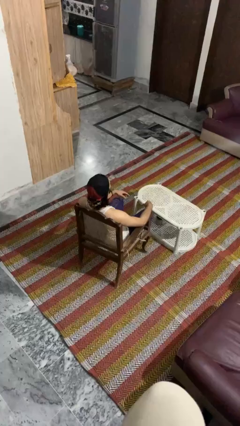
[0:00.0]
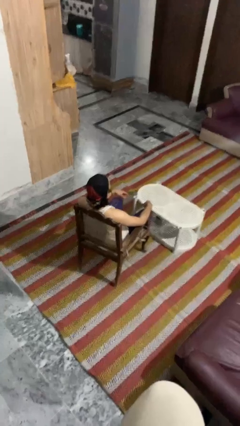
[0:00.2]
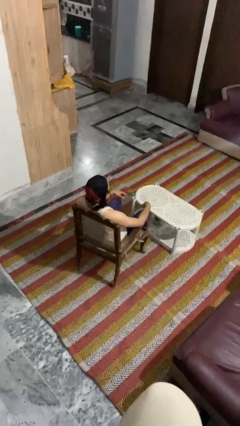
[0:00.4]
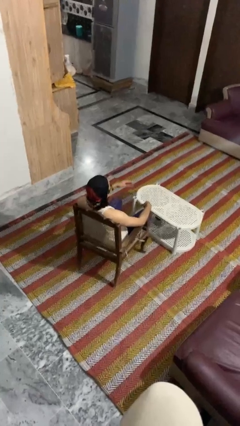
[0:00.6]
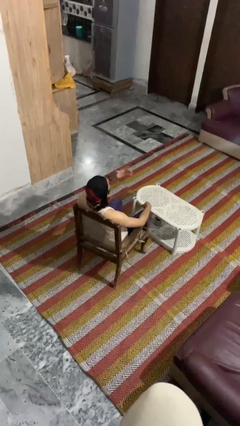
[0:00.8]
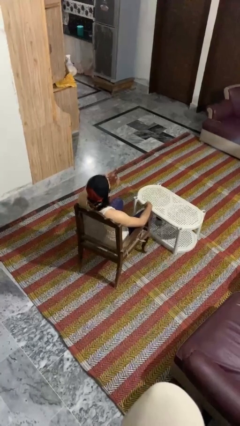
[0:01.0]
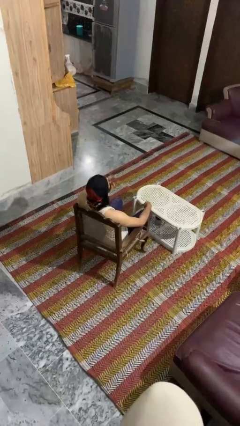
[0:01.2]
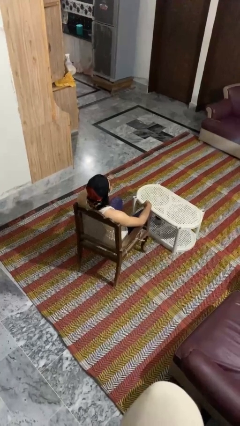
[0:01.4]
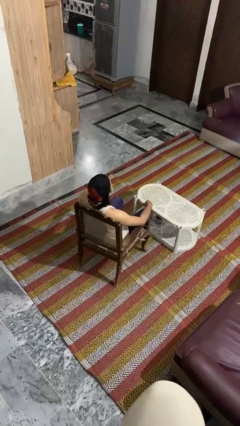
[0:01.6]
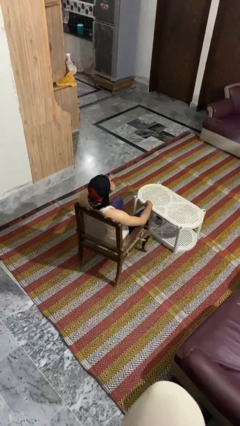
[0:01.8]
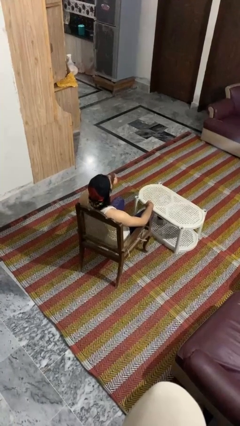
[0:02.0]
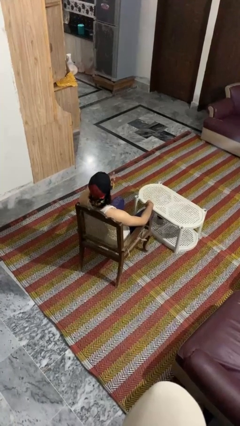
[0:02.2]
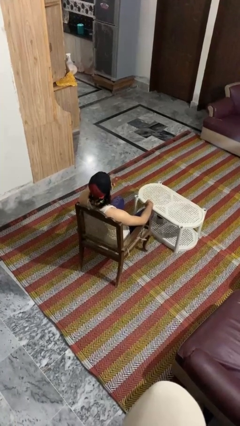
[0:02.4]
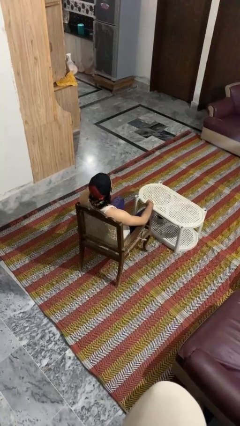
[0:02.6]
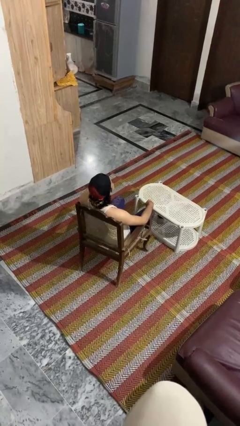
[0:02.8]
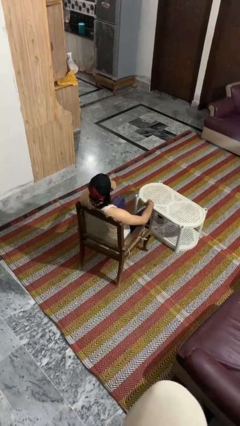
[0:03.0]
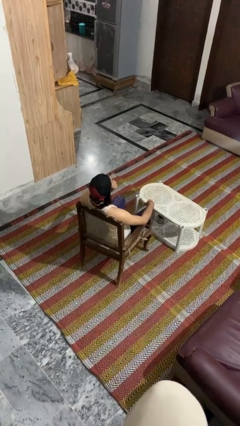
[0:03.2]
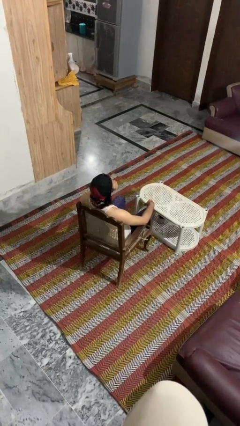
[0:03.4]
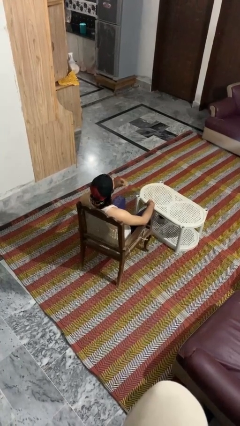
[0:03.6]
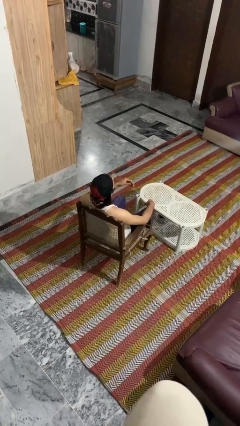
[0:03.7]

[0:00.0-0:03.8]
person strokes chin

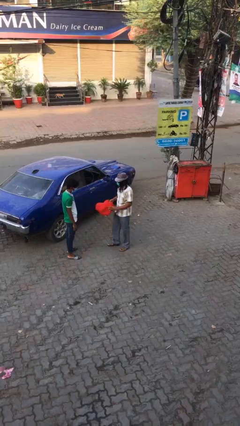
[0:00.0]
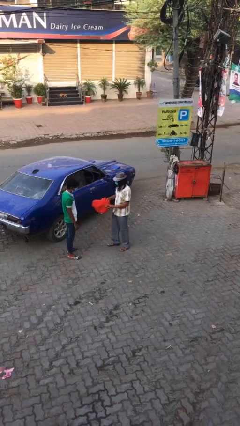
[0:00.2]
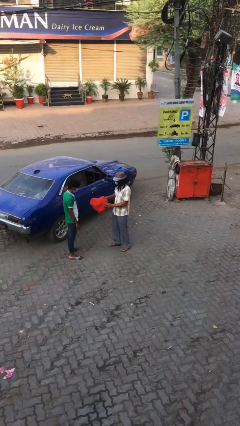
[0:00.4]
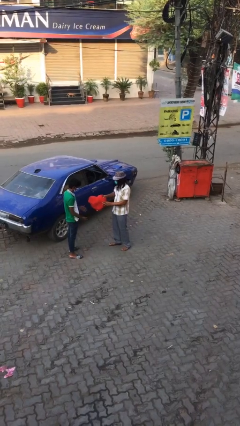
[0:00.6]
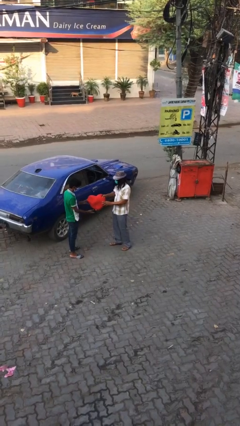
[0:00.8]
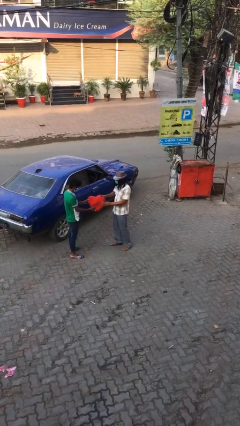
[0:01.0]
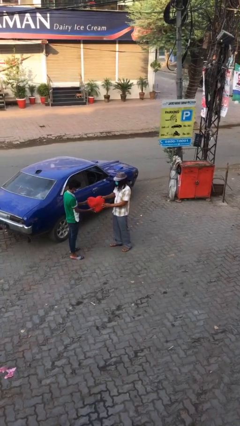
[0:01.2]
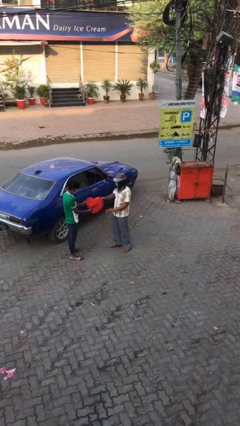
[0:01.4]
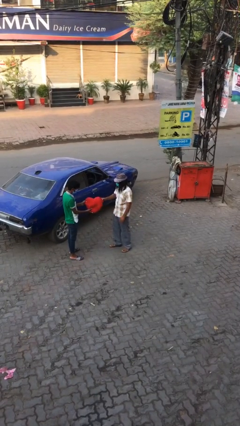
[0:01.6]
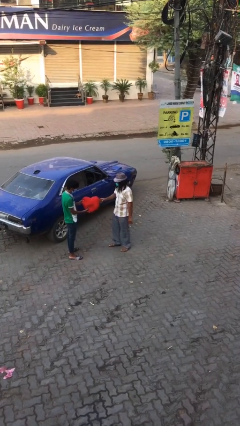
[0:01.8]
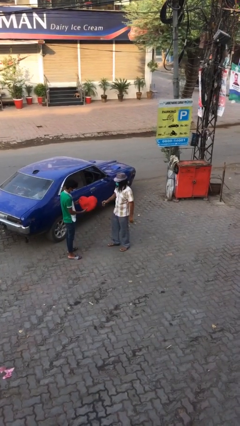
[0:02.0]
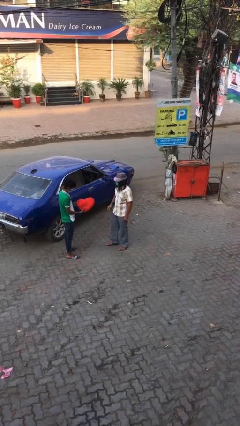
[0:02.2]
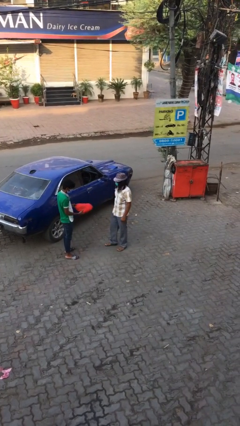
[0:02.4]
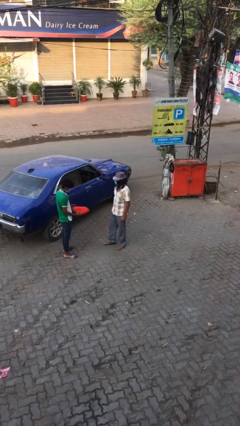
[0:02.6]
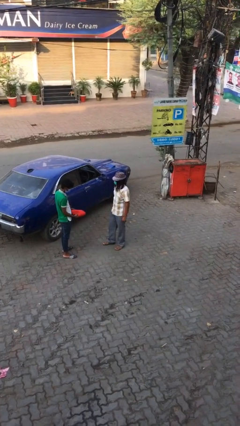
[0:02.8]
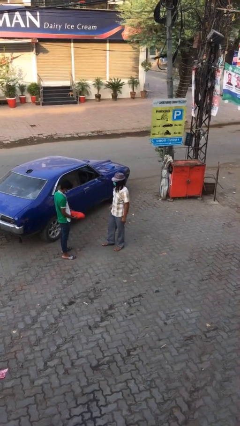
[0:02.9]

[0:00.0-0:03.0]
person transfers object to person

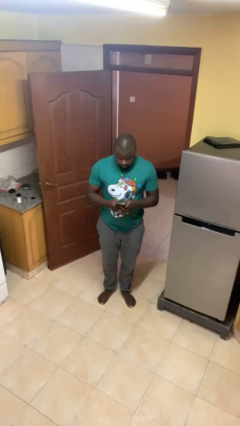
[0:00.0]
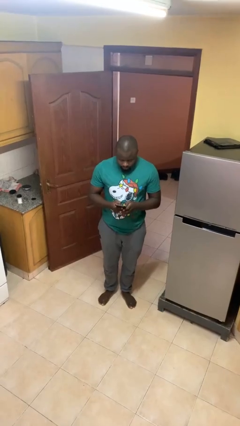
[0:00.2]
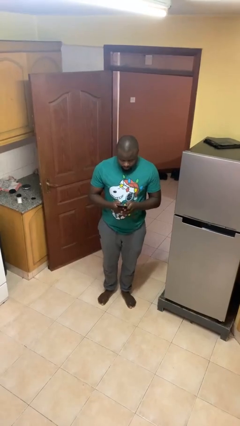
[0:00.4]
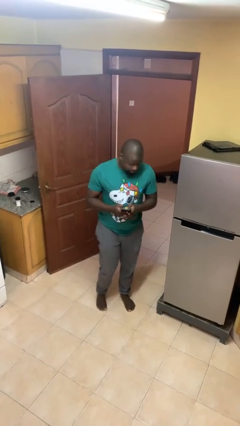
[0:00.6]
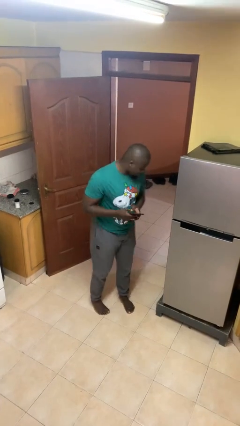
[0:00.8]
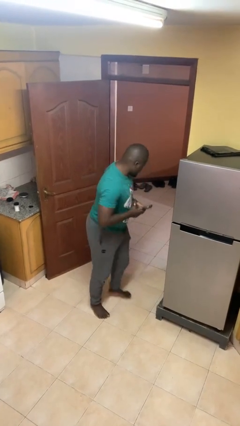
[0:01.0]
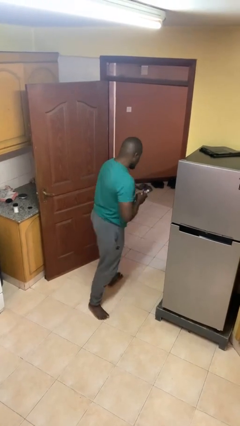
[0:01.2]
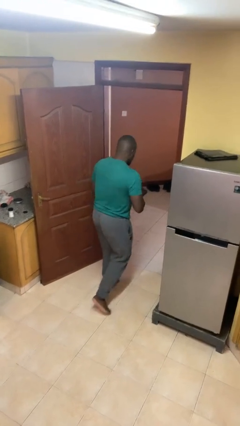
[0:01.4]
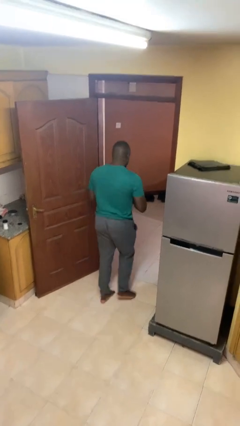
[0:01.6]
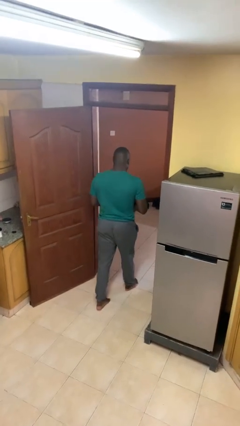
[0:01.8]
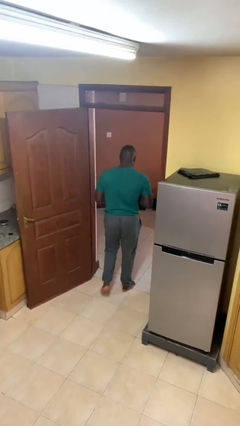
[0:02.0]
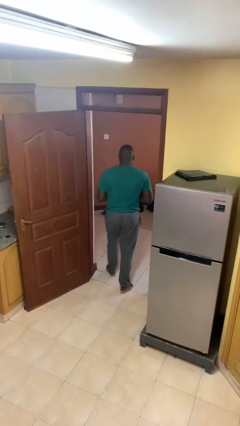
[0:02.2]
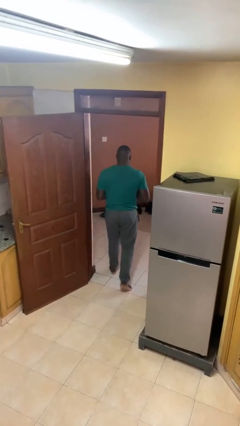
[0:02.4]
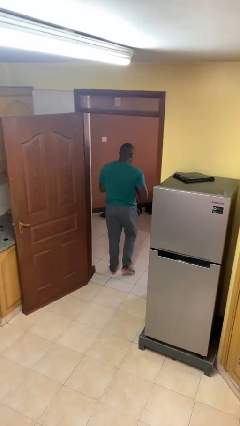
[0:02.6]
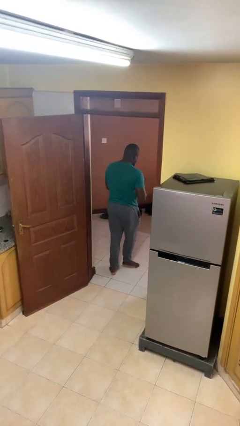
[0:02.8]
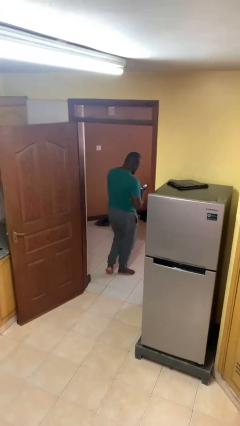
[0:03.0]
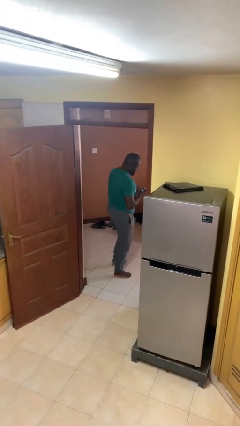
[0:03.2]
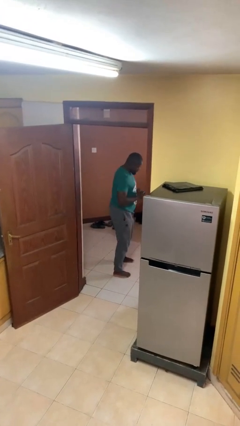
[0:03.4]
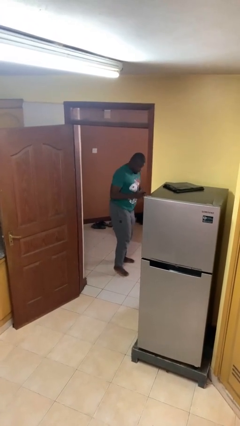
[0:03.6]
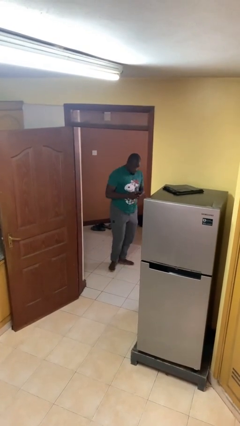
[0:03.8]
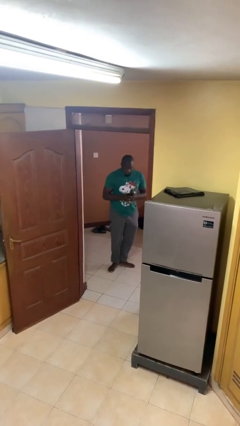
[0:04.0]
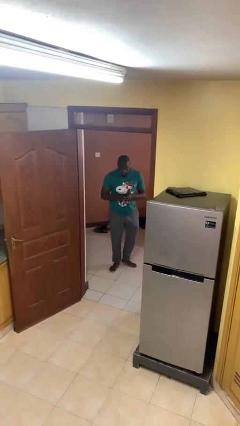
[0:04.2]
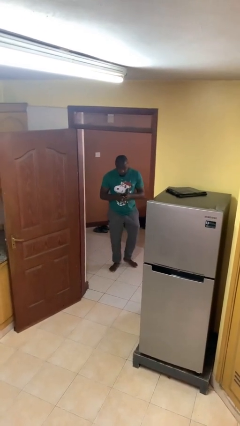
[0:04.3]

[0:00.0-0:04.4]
person exits scene through structure

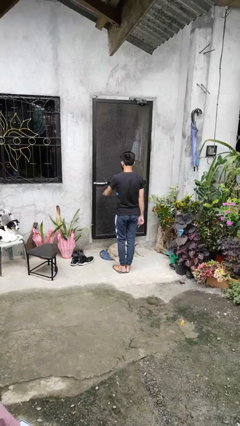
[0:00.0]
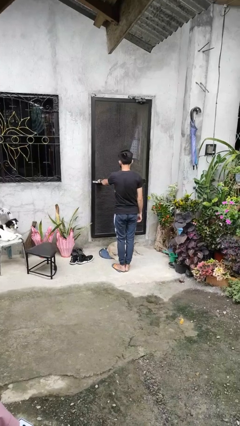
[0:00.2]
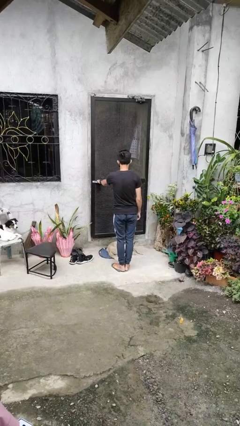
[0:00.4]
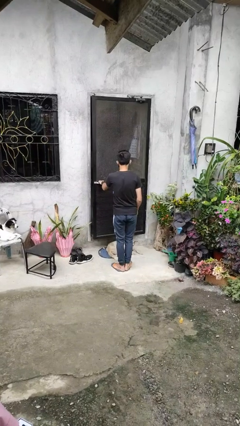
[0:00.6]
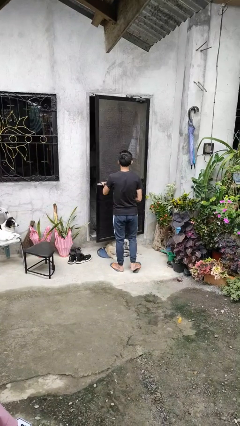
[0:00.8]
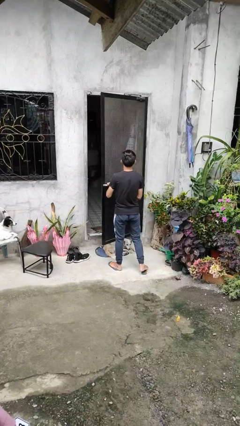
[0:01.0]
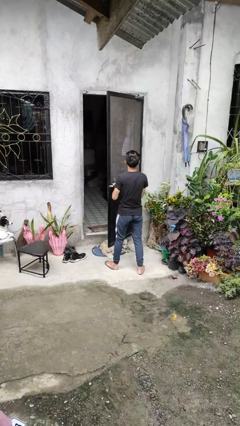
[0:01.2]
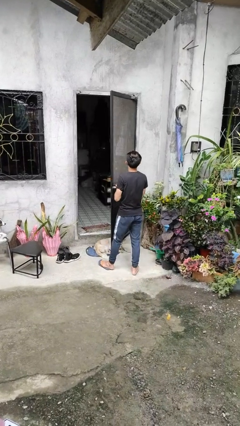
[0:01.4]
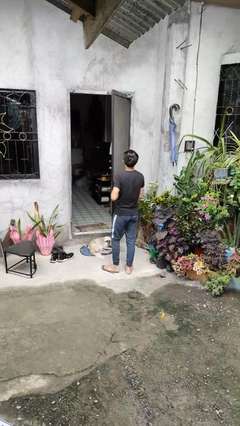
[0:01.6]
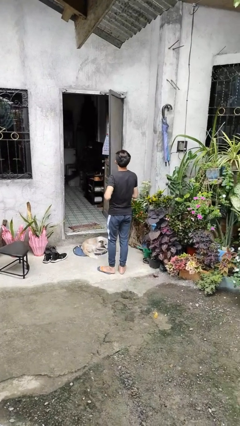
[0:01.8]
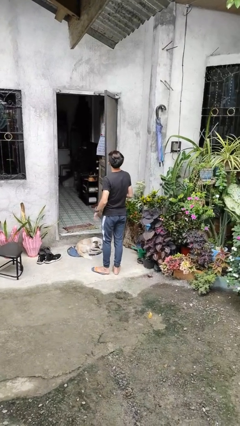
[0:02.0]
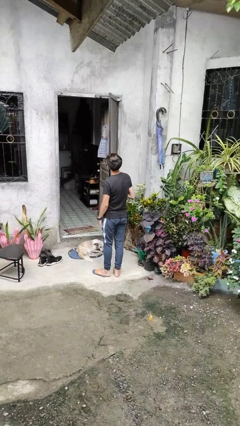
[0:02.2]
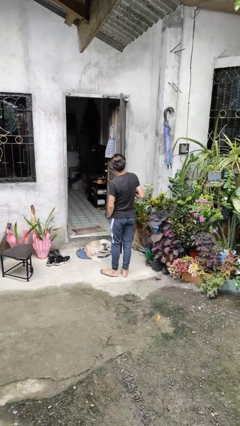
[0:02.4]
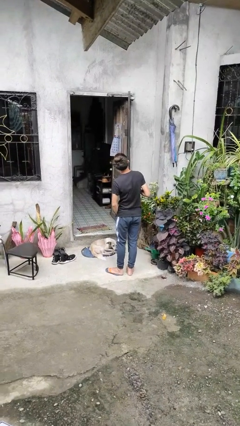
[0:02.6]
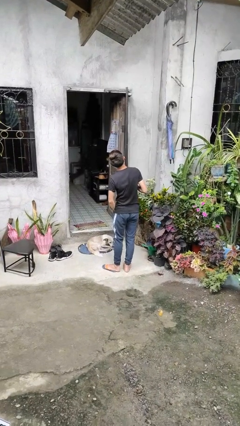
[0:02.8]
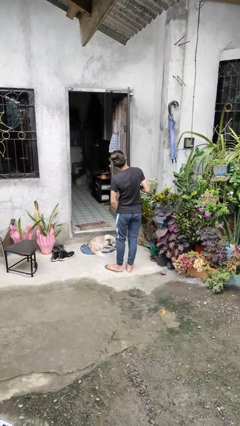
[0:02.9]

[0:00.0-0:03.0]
person opens facility door

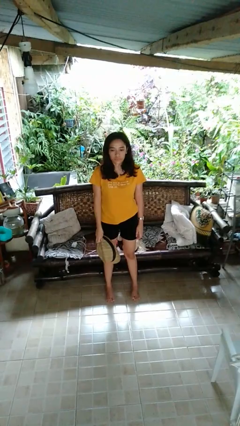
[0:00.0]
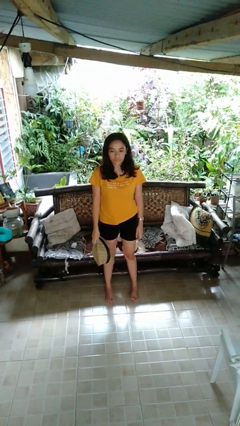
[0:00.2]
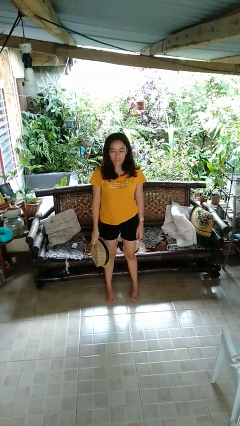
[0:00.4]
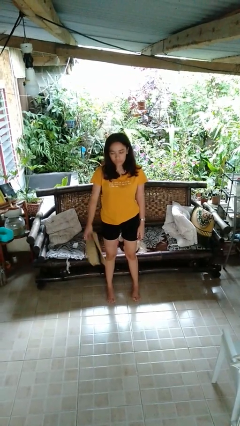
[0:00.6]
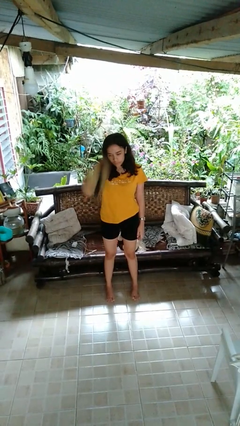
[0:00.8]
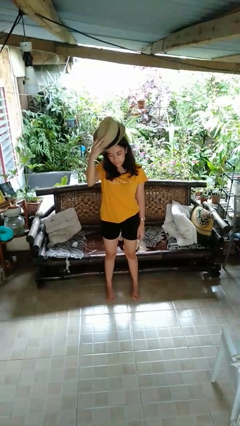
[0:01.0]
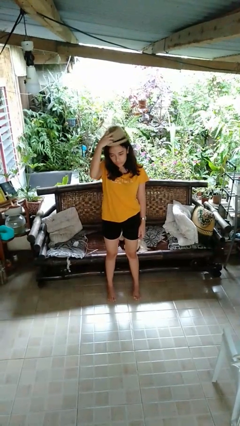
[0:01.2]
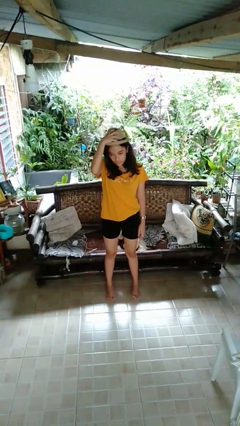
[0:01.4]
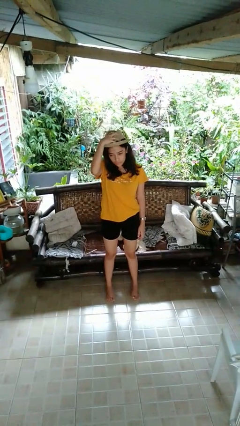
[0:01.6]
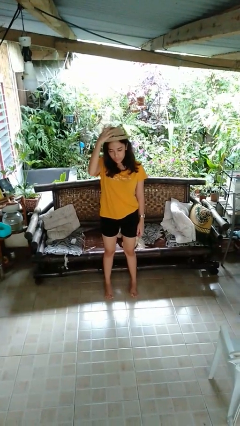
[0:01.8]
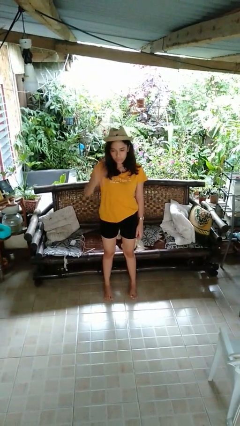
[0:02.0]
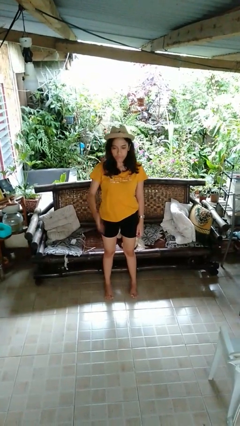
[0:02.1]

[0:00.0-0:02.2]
person puts on hat

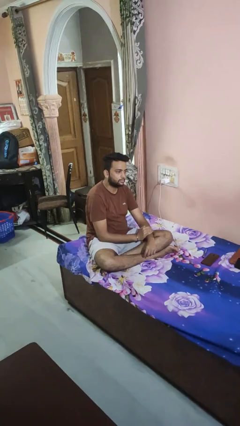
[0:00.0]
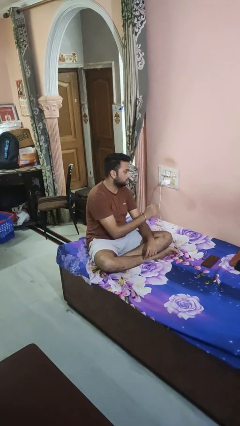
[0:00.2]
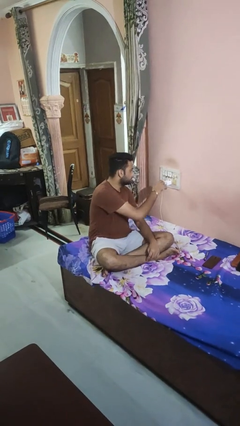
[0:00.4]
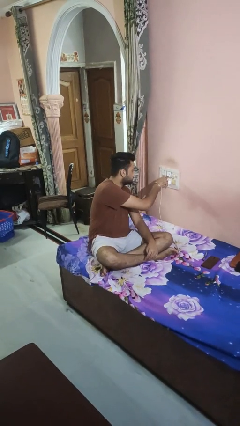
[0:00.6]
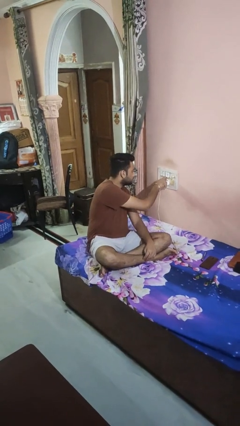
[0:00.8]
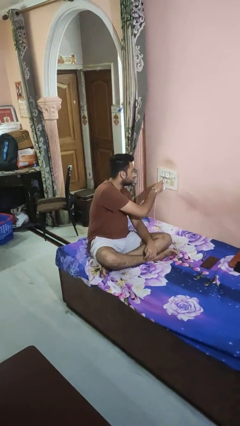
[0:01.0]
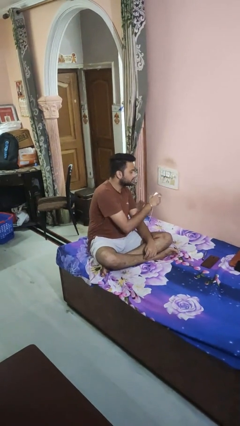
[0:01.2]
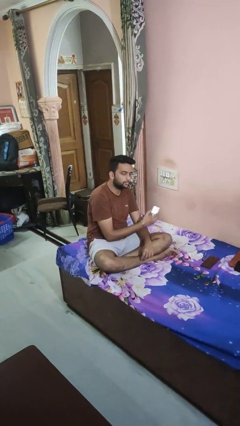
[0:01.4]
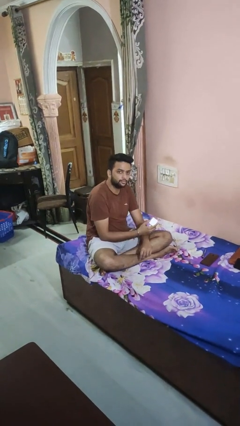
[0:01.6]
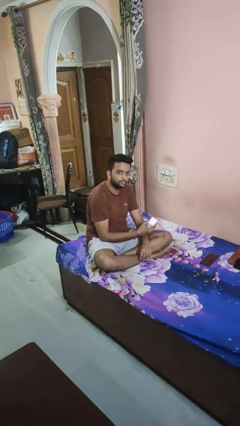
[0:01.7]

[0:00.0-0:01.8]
person unplugs from electrical socket
